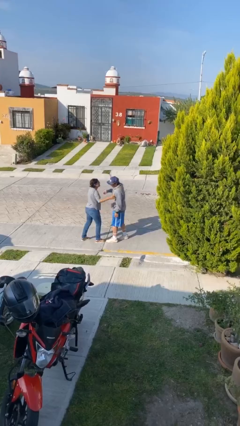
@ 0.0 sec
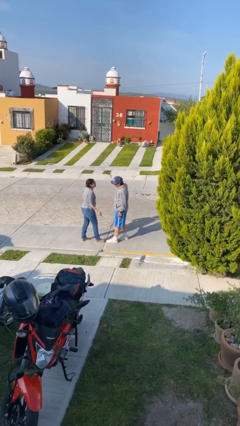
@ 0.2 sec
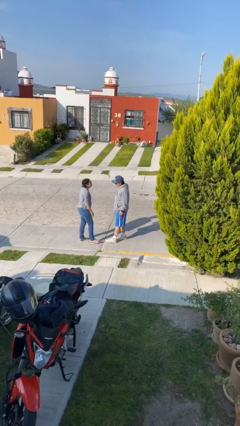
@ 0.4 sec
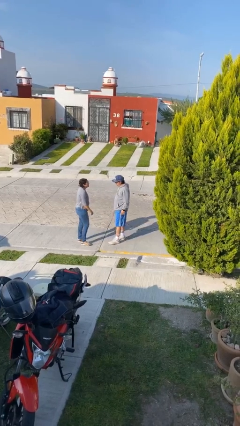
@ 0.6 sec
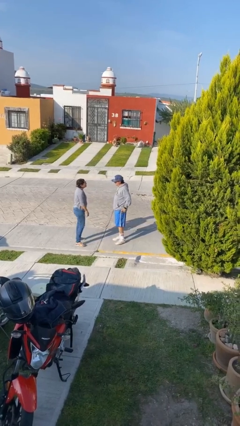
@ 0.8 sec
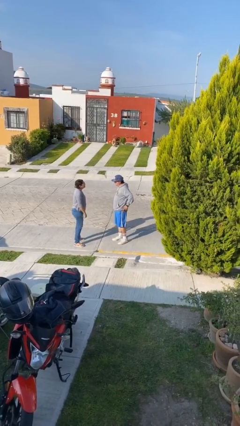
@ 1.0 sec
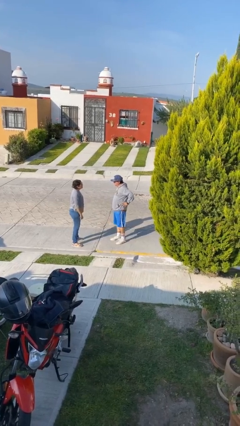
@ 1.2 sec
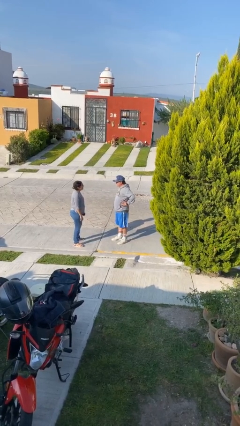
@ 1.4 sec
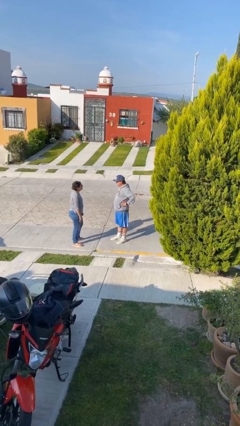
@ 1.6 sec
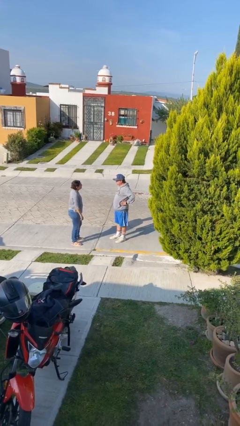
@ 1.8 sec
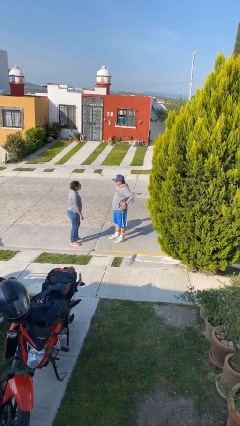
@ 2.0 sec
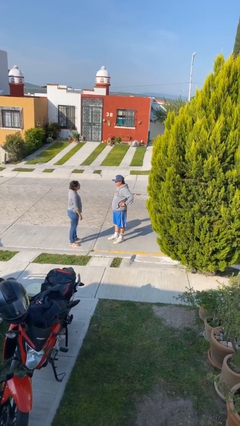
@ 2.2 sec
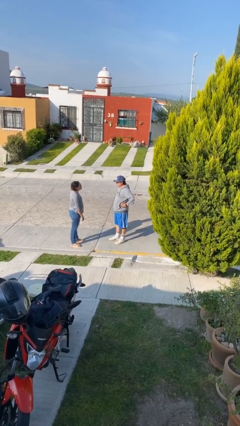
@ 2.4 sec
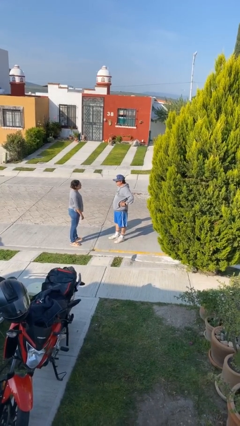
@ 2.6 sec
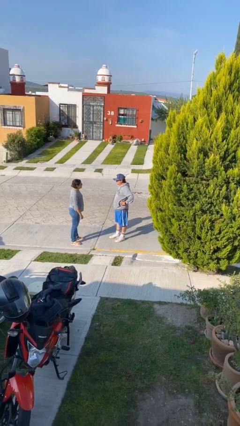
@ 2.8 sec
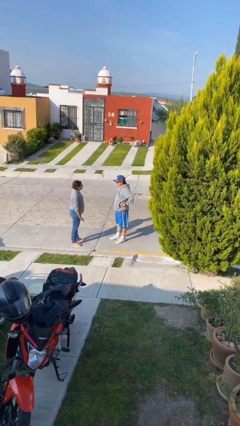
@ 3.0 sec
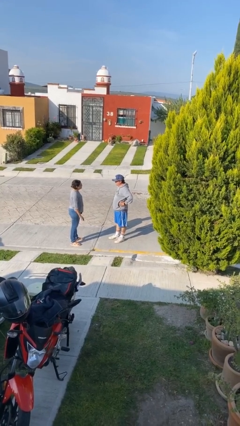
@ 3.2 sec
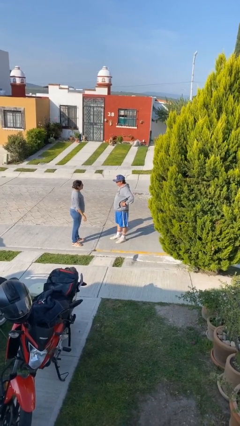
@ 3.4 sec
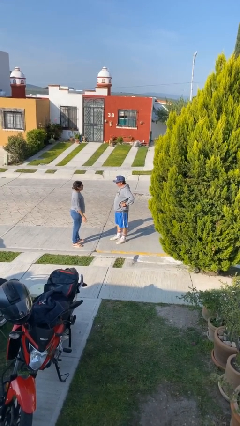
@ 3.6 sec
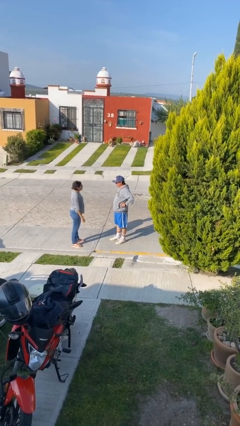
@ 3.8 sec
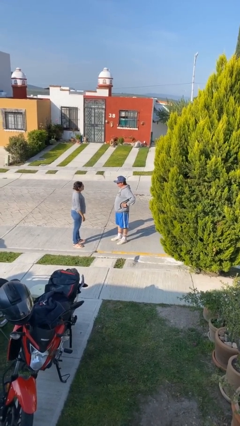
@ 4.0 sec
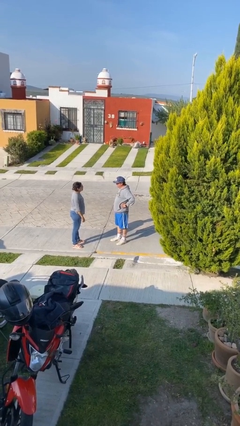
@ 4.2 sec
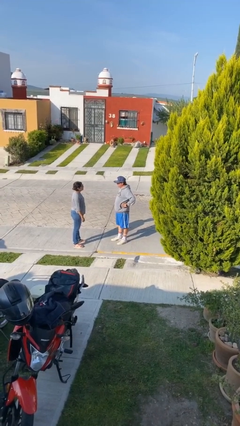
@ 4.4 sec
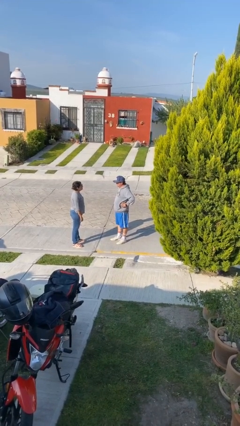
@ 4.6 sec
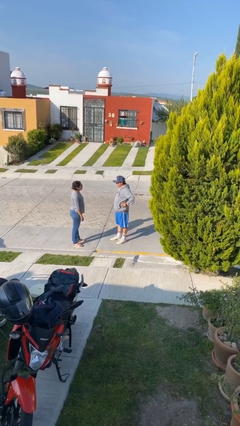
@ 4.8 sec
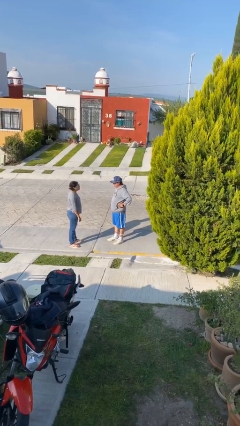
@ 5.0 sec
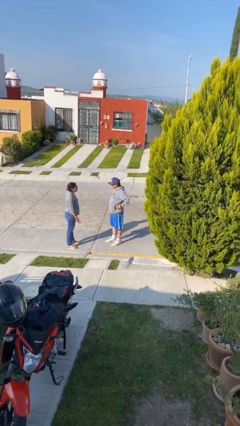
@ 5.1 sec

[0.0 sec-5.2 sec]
person talks to person

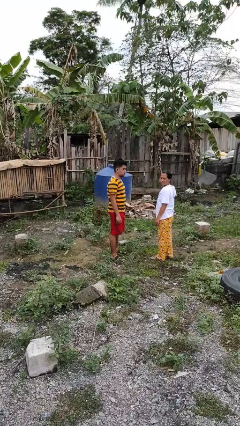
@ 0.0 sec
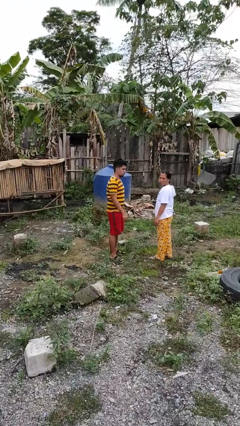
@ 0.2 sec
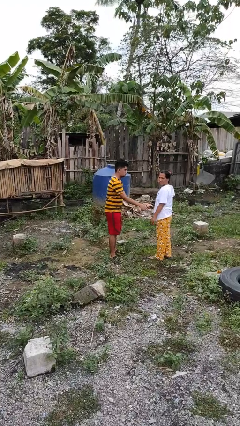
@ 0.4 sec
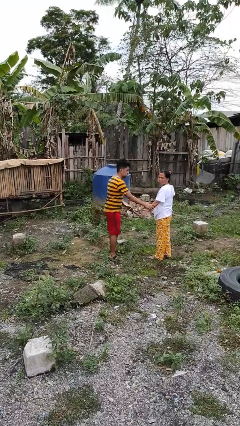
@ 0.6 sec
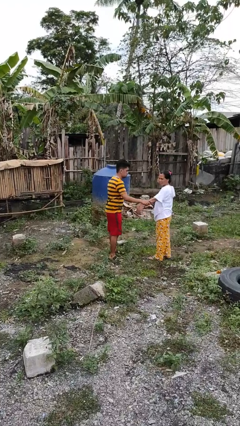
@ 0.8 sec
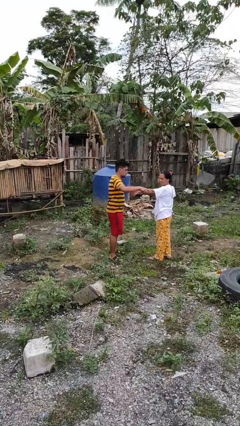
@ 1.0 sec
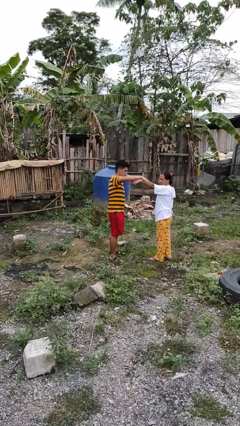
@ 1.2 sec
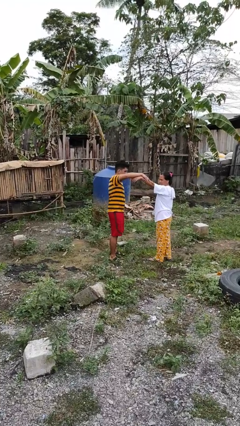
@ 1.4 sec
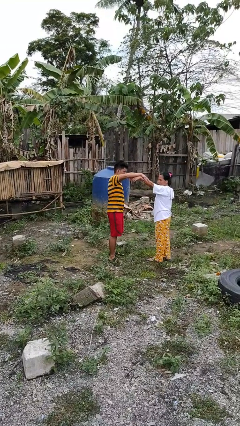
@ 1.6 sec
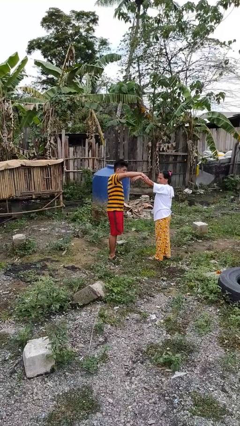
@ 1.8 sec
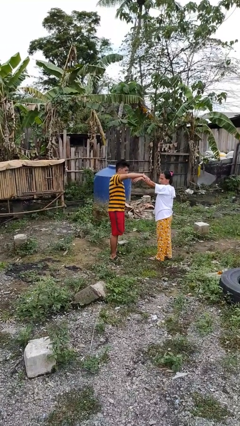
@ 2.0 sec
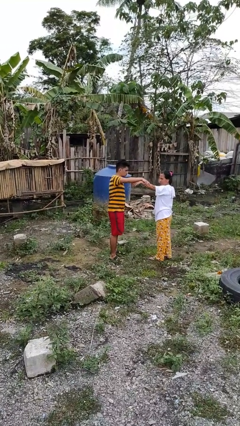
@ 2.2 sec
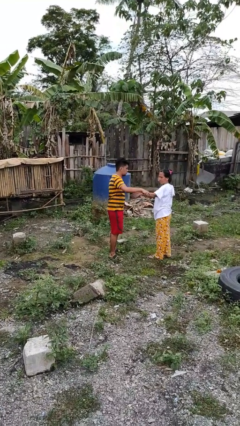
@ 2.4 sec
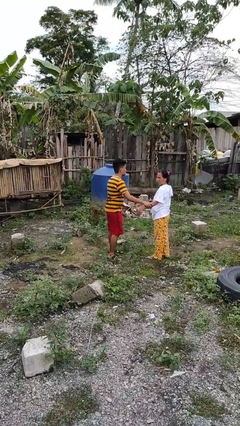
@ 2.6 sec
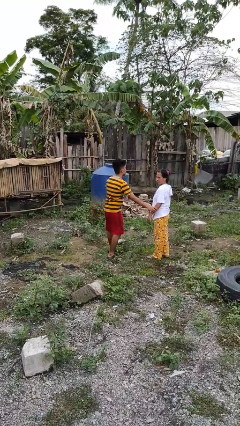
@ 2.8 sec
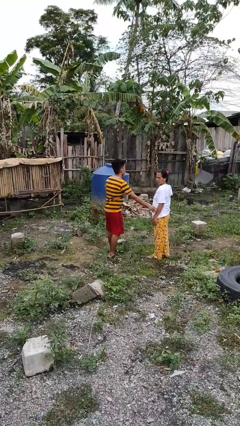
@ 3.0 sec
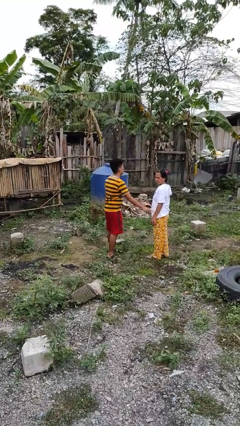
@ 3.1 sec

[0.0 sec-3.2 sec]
person grabs person by forearm

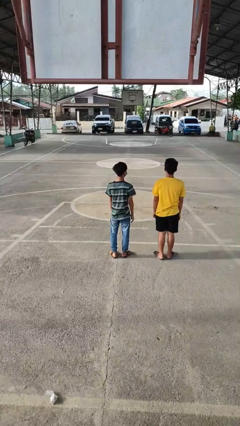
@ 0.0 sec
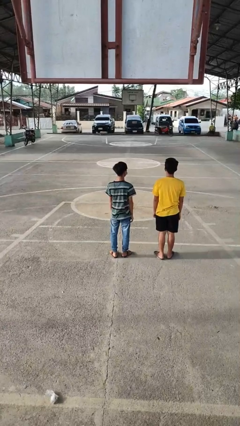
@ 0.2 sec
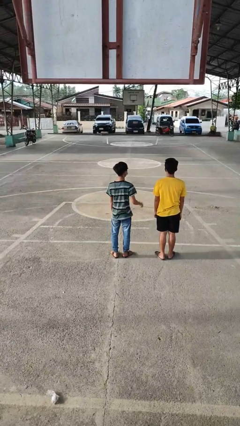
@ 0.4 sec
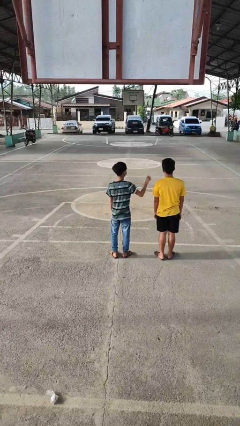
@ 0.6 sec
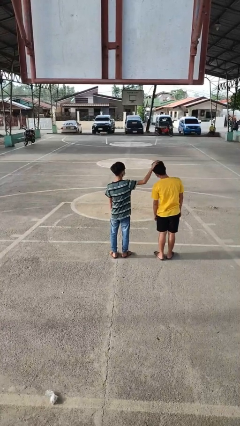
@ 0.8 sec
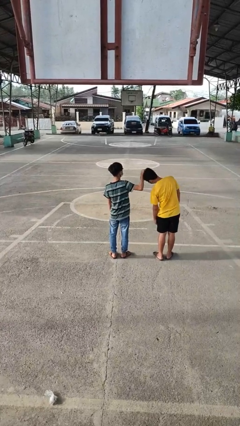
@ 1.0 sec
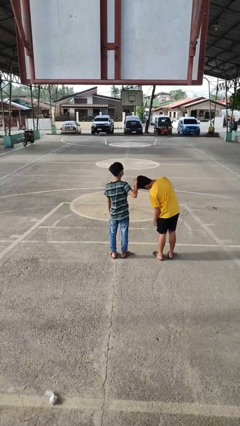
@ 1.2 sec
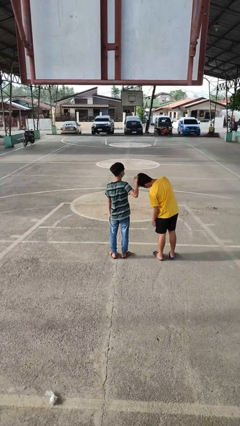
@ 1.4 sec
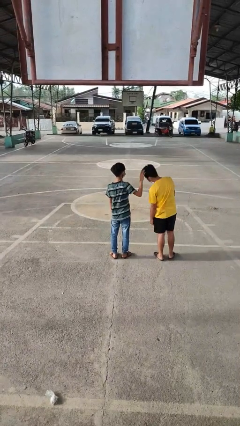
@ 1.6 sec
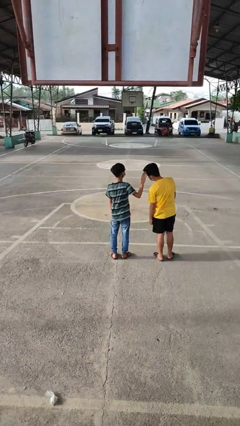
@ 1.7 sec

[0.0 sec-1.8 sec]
person grabs person by hair

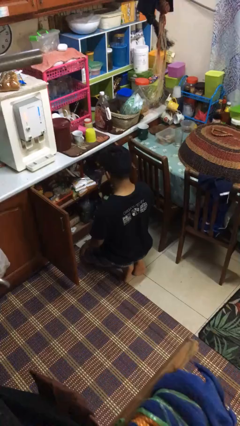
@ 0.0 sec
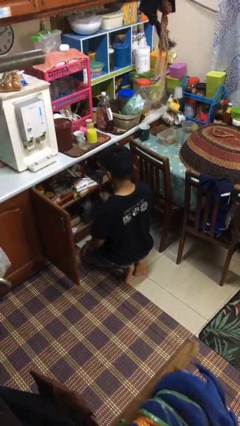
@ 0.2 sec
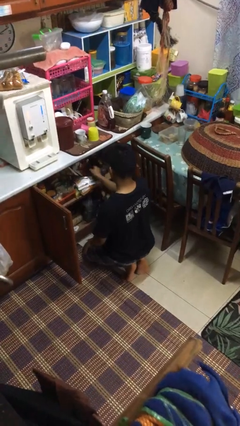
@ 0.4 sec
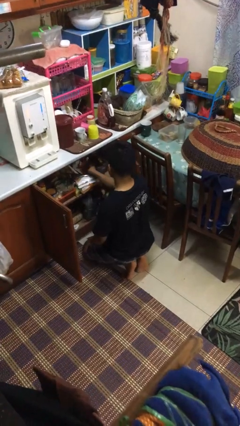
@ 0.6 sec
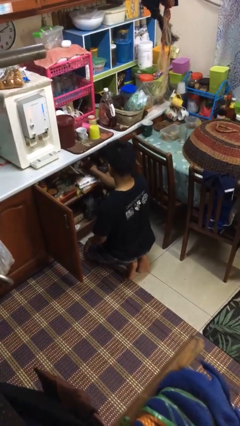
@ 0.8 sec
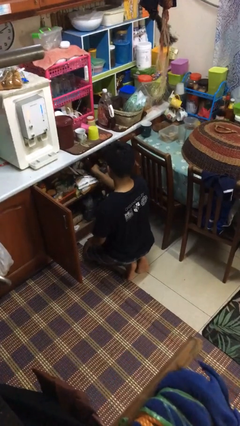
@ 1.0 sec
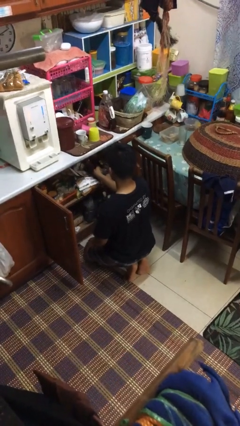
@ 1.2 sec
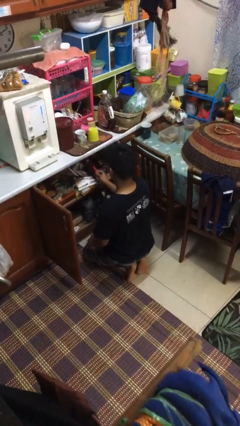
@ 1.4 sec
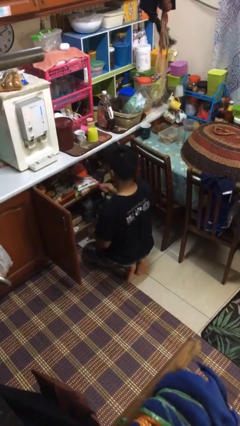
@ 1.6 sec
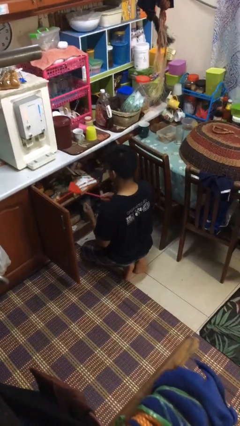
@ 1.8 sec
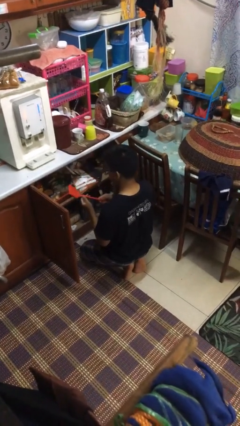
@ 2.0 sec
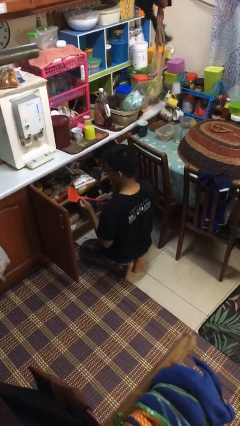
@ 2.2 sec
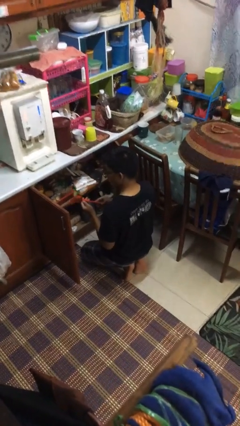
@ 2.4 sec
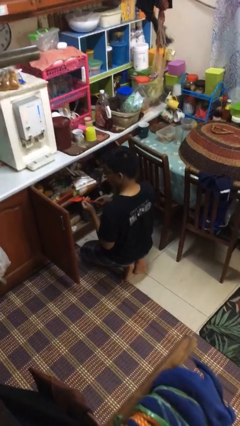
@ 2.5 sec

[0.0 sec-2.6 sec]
person takes object from kitchen drawer

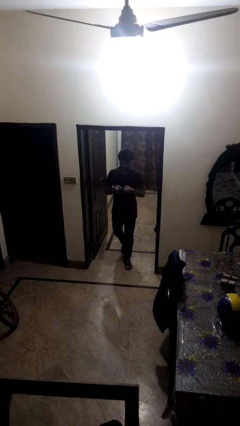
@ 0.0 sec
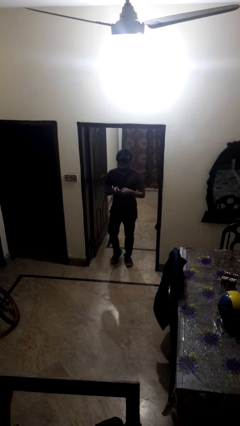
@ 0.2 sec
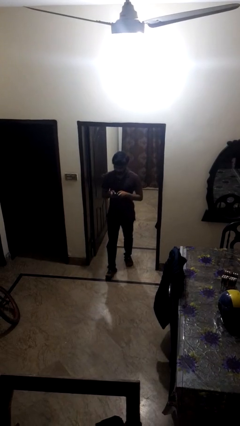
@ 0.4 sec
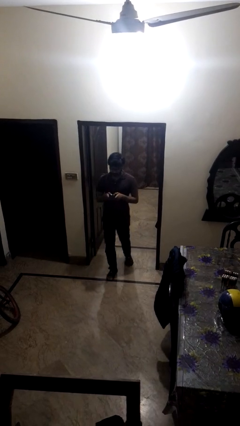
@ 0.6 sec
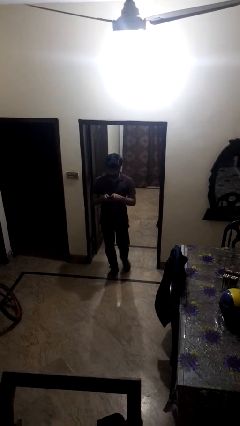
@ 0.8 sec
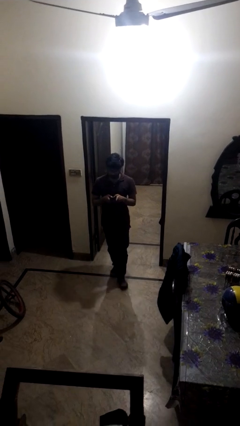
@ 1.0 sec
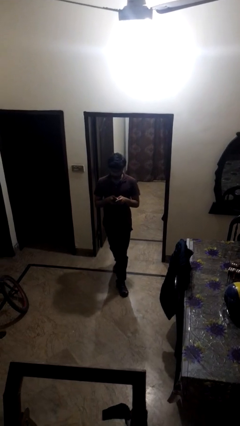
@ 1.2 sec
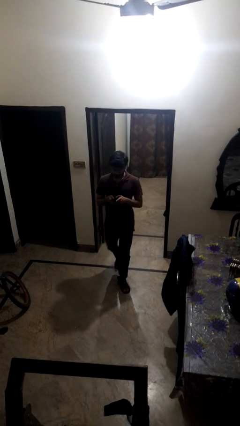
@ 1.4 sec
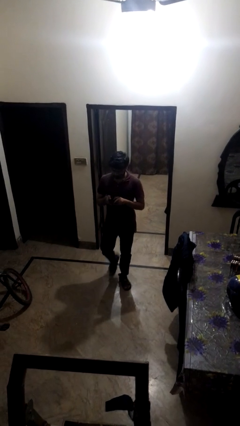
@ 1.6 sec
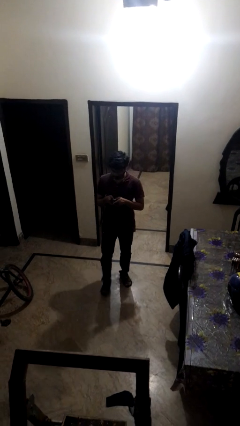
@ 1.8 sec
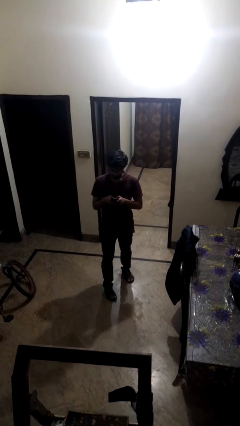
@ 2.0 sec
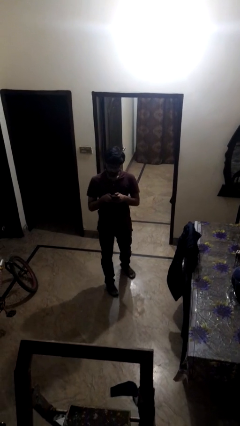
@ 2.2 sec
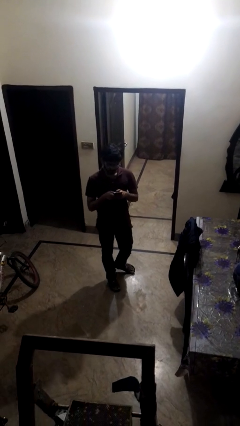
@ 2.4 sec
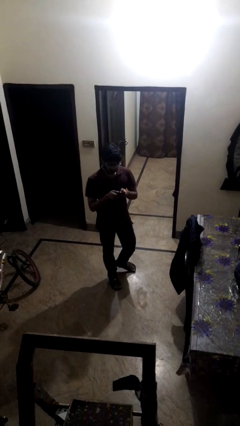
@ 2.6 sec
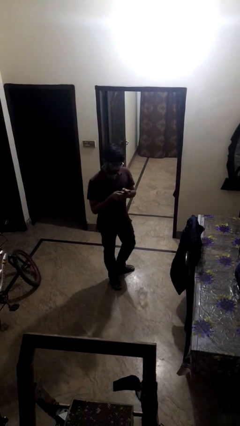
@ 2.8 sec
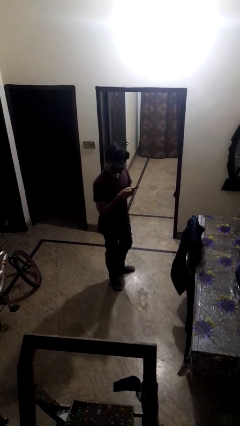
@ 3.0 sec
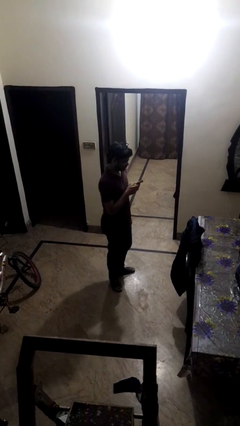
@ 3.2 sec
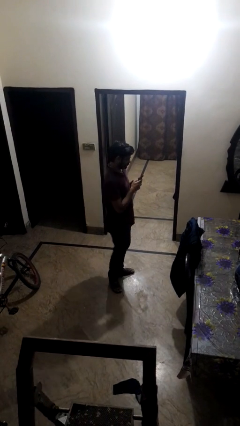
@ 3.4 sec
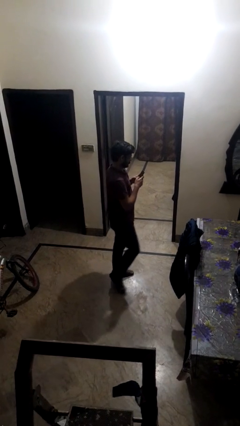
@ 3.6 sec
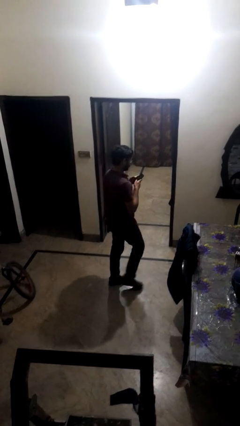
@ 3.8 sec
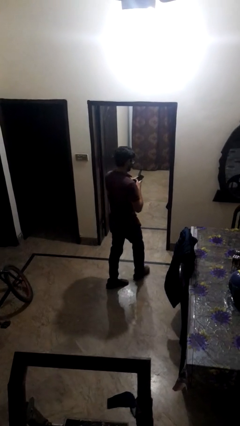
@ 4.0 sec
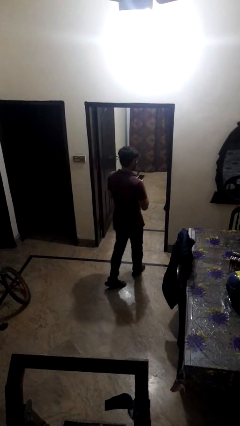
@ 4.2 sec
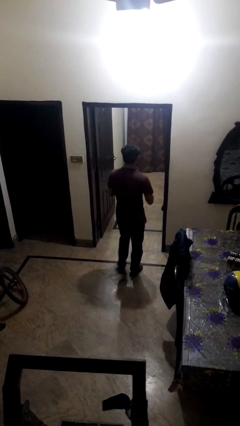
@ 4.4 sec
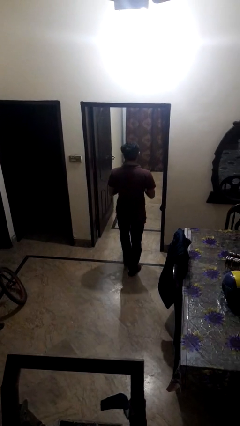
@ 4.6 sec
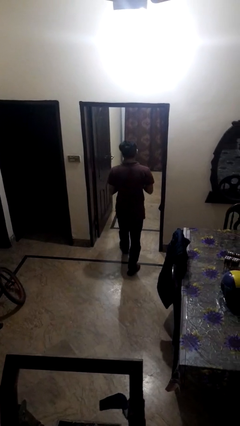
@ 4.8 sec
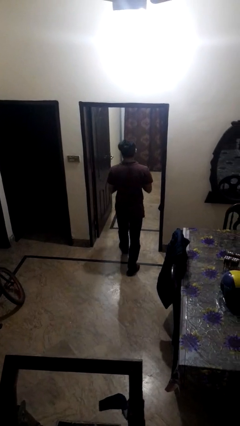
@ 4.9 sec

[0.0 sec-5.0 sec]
person enters scene through structure
